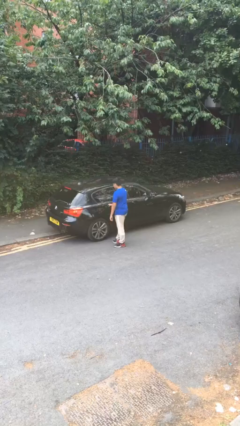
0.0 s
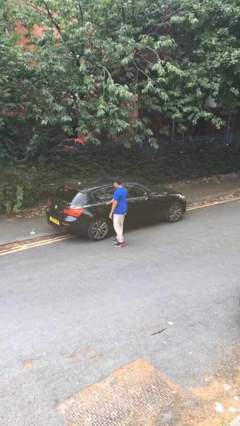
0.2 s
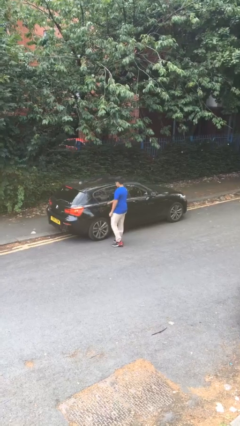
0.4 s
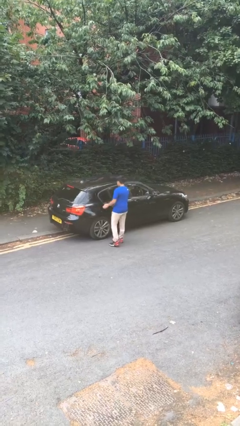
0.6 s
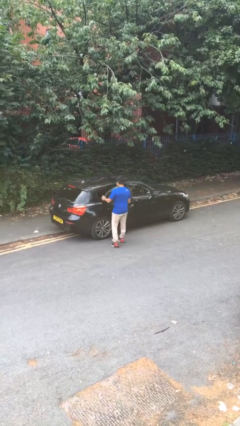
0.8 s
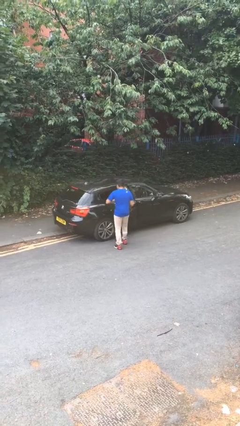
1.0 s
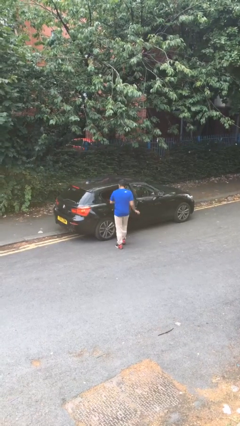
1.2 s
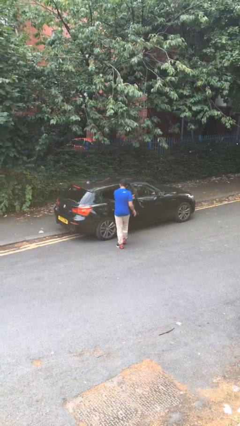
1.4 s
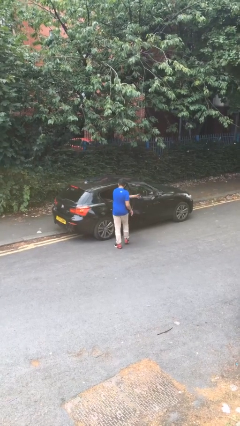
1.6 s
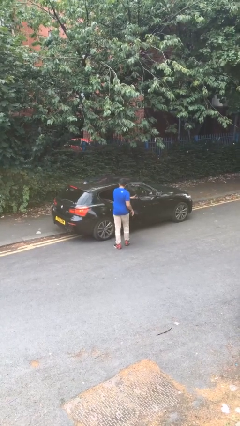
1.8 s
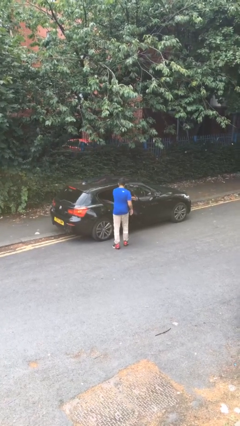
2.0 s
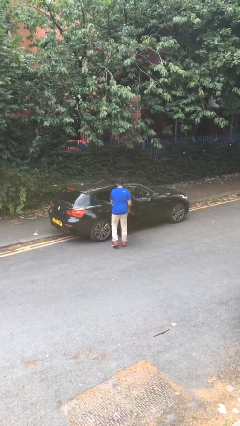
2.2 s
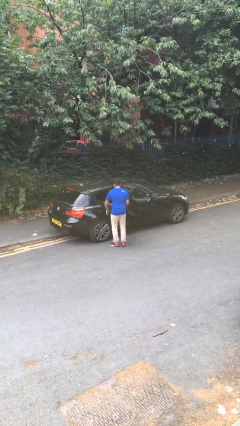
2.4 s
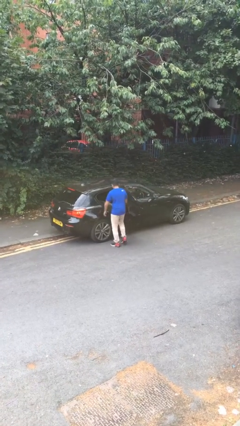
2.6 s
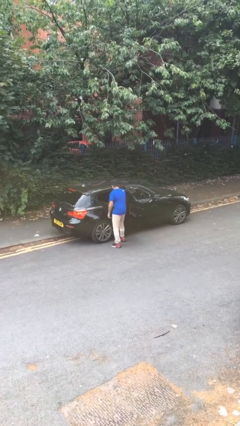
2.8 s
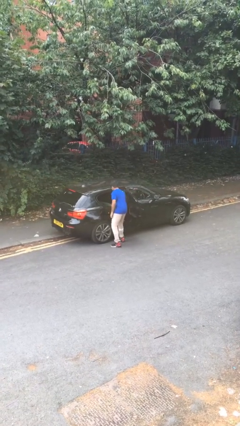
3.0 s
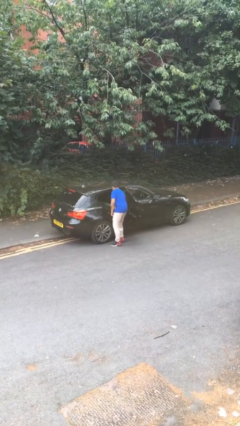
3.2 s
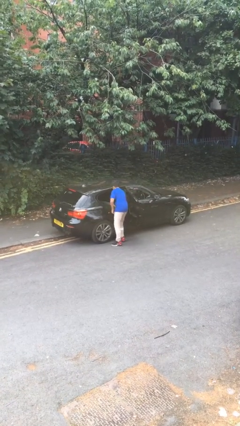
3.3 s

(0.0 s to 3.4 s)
person opens car door

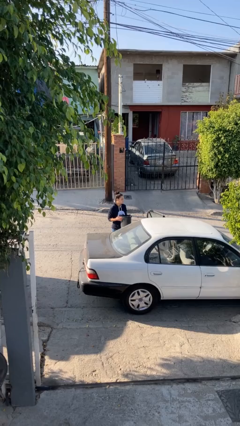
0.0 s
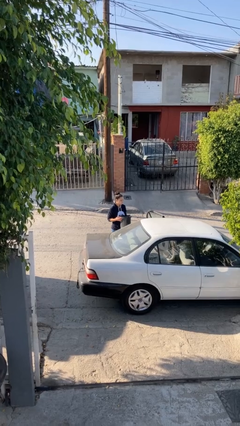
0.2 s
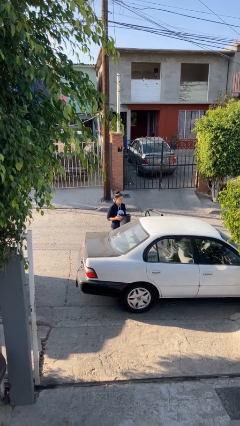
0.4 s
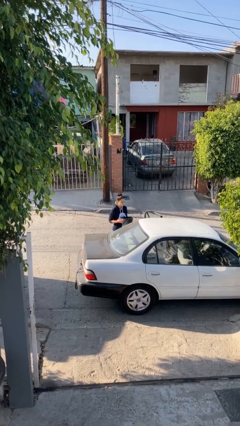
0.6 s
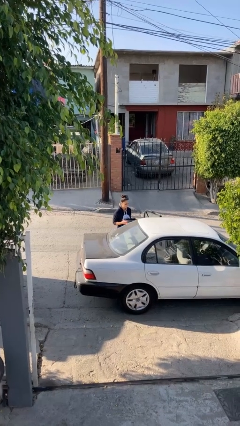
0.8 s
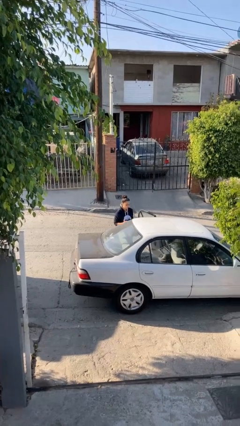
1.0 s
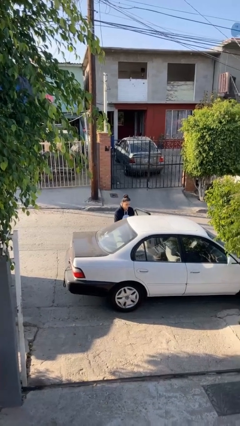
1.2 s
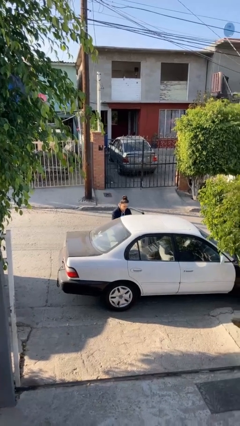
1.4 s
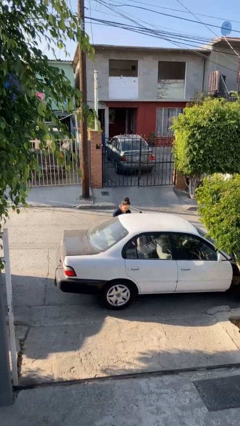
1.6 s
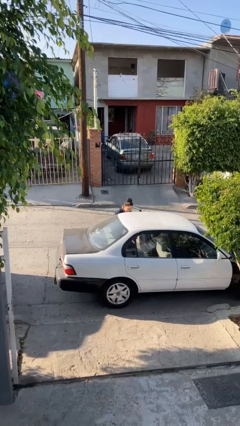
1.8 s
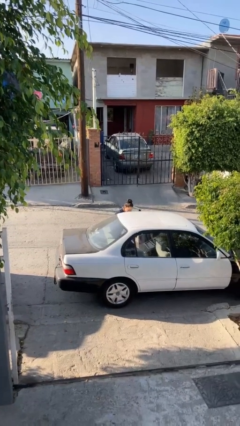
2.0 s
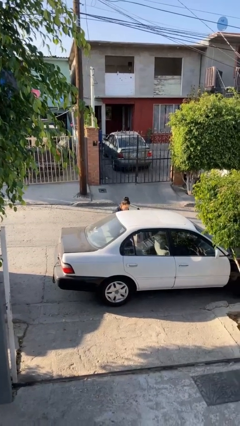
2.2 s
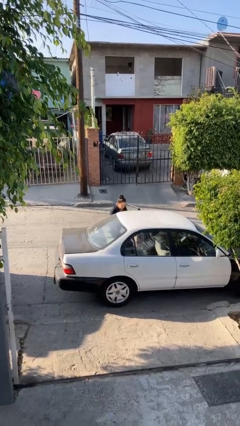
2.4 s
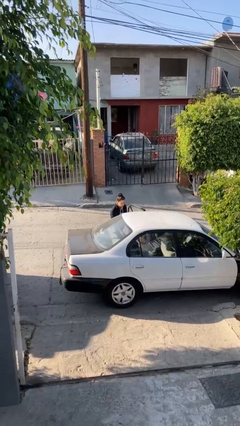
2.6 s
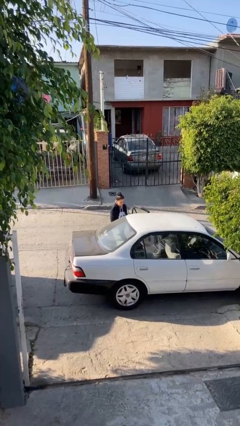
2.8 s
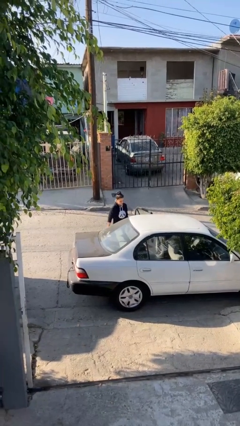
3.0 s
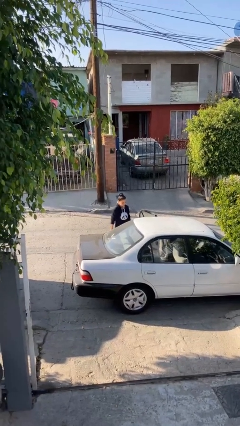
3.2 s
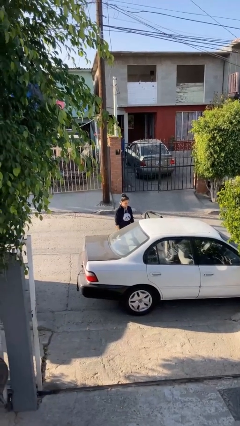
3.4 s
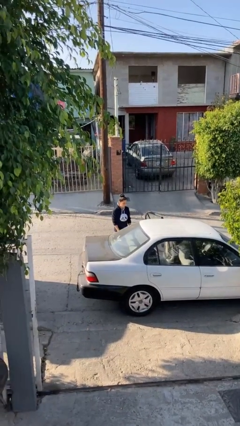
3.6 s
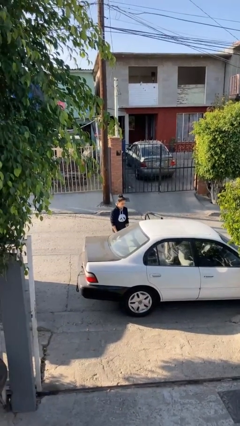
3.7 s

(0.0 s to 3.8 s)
person loads car

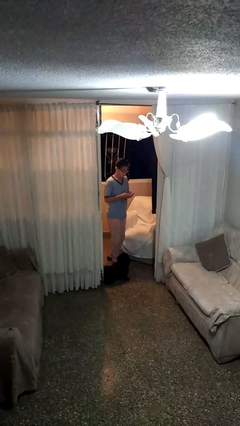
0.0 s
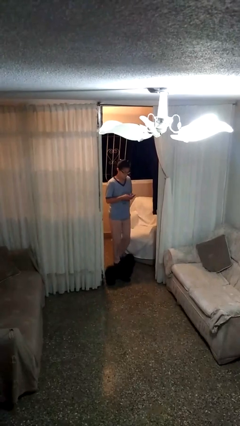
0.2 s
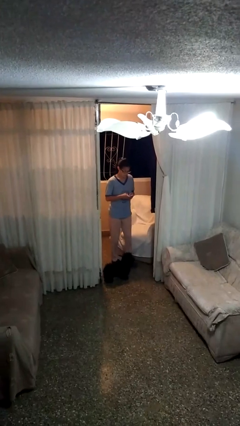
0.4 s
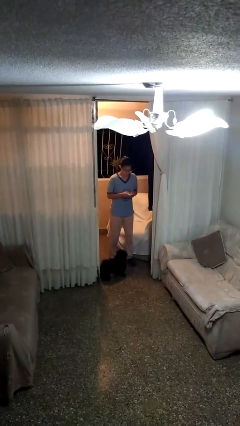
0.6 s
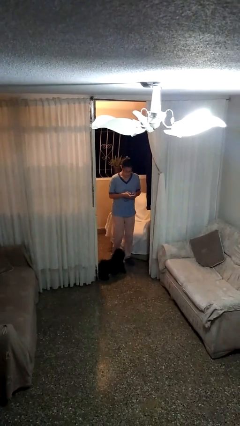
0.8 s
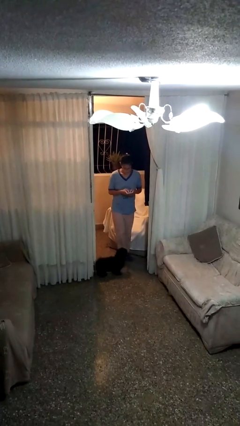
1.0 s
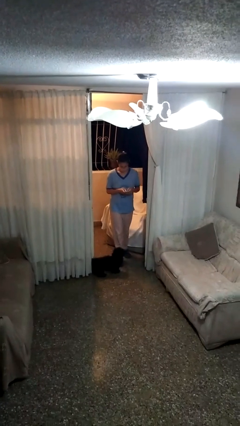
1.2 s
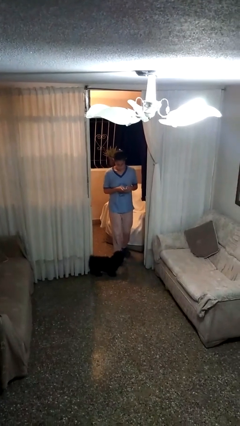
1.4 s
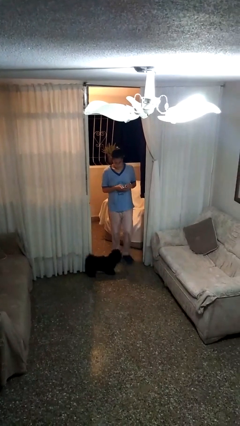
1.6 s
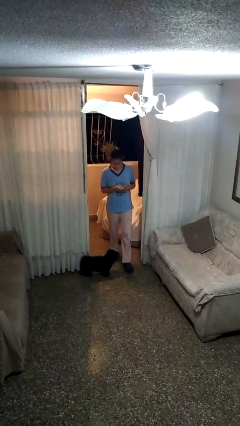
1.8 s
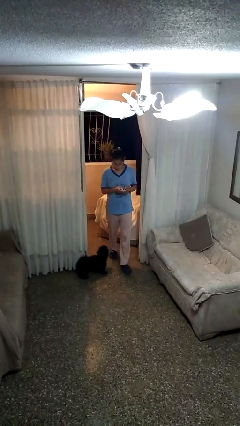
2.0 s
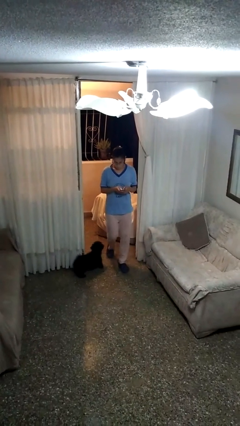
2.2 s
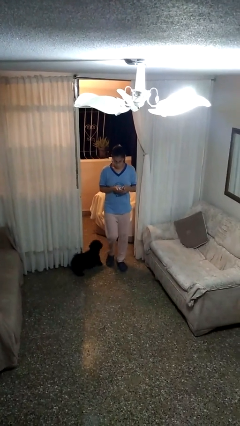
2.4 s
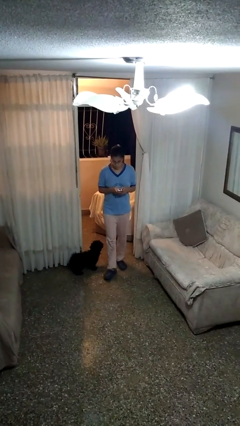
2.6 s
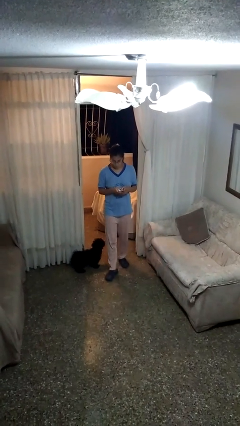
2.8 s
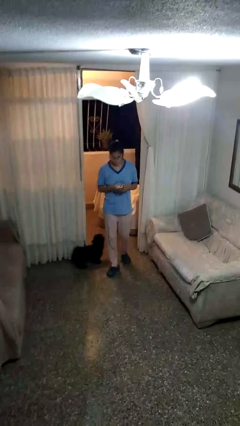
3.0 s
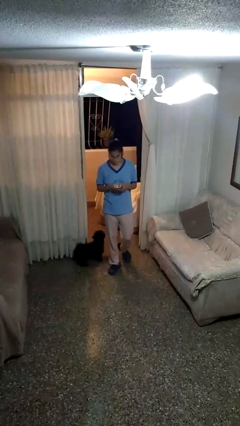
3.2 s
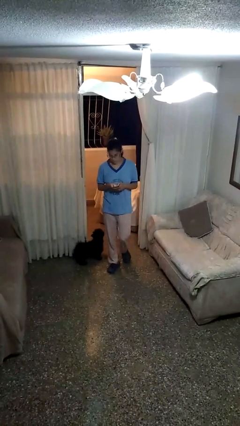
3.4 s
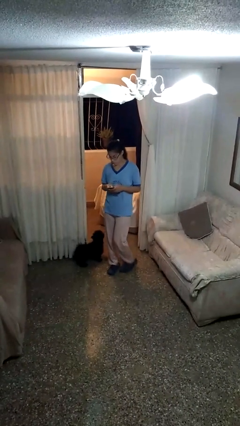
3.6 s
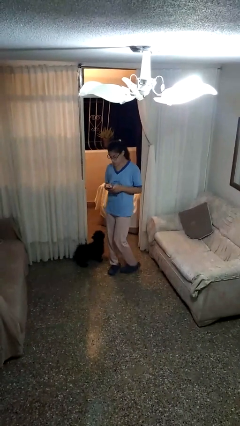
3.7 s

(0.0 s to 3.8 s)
person enters scene through structure

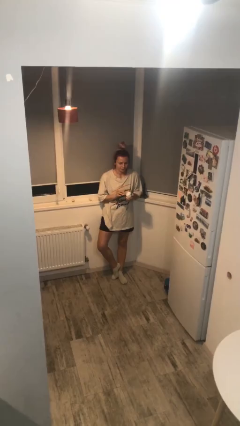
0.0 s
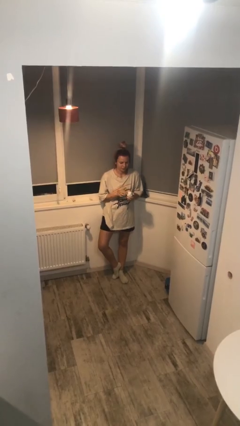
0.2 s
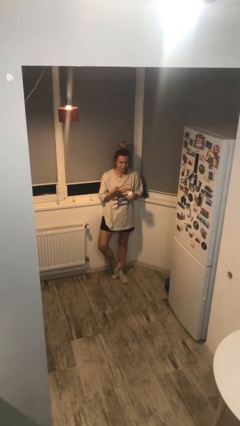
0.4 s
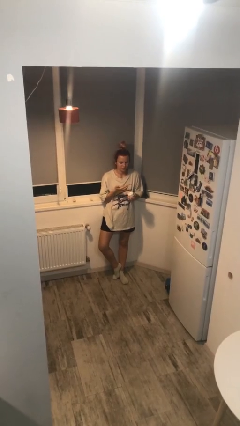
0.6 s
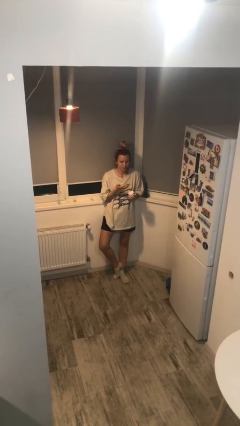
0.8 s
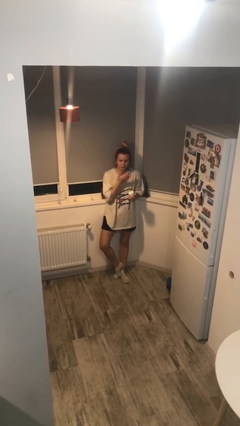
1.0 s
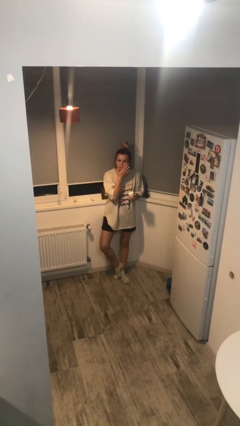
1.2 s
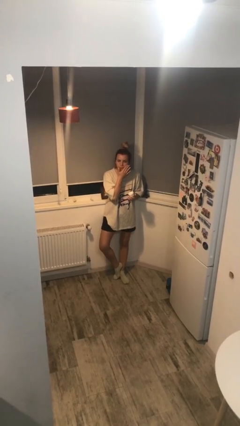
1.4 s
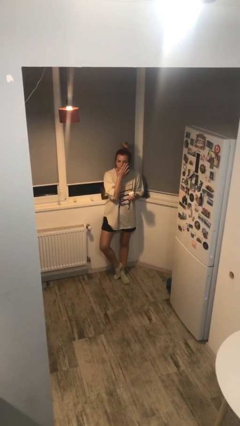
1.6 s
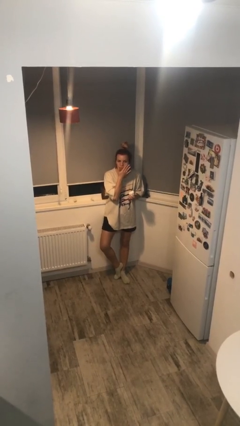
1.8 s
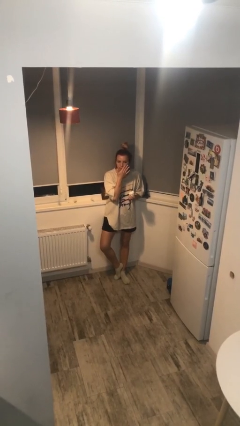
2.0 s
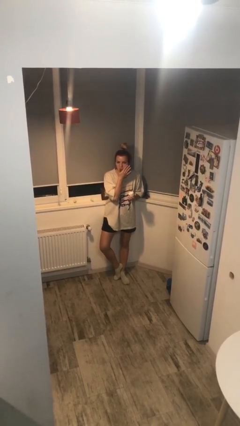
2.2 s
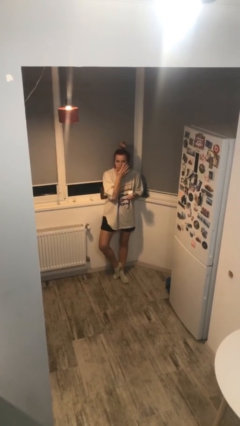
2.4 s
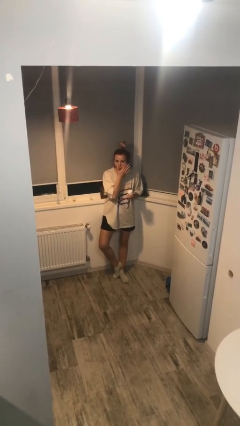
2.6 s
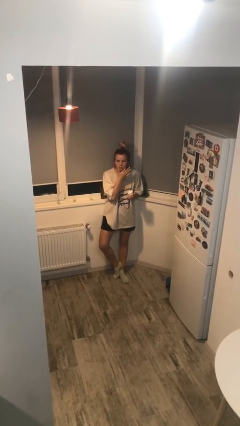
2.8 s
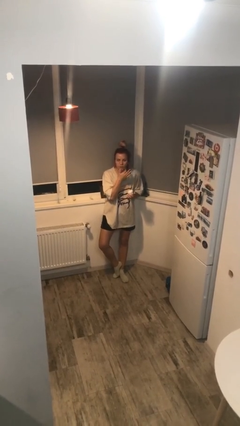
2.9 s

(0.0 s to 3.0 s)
person applies facial moisturizer

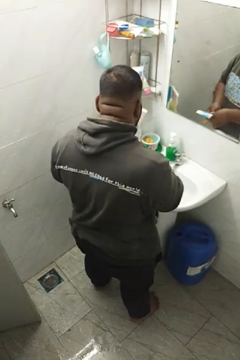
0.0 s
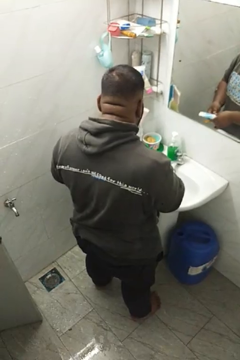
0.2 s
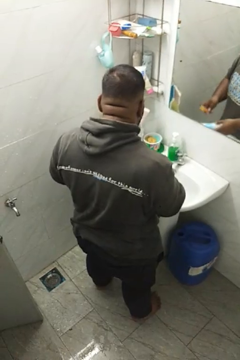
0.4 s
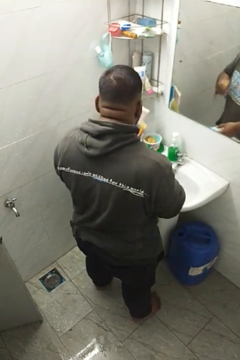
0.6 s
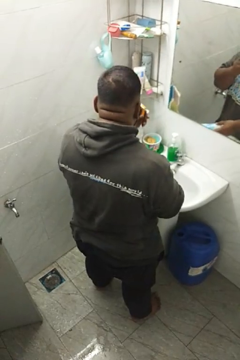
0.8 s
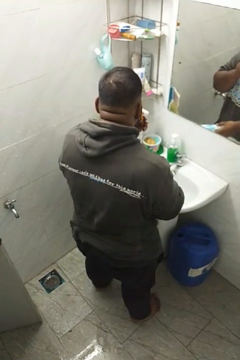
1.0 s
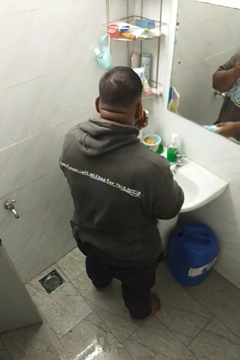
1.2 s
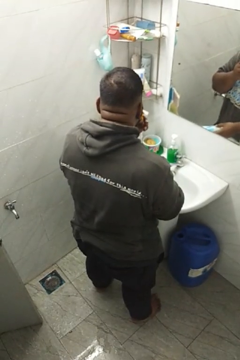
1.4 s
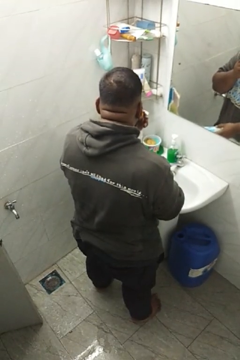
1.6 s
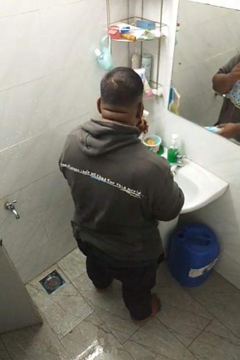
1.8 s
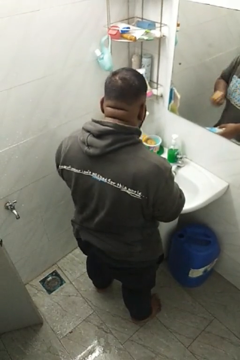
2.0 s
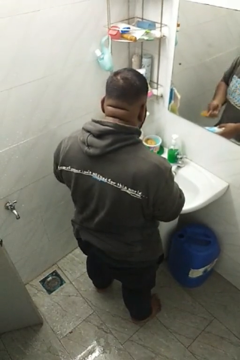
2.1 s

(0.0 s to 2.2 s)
person shaves face

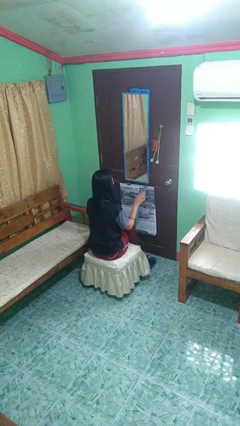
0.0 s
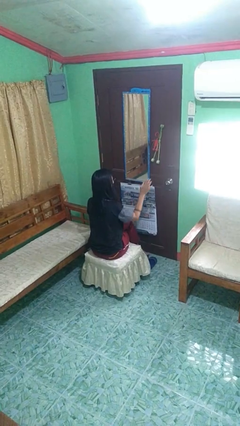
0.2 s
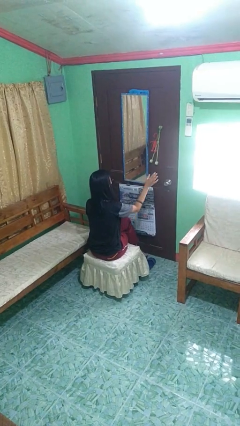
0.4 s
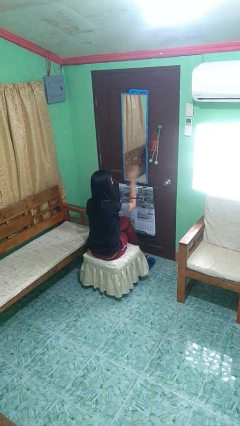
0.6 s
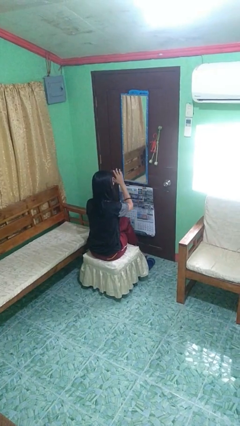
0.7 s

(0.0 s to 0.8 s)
person gestures swipe right

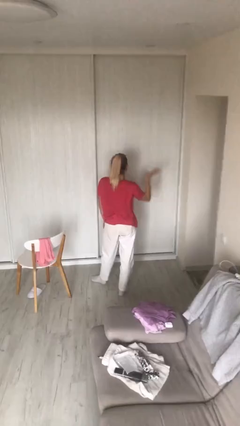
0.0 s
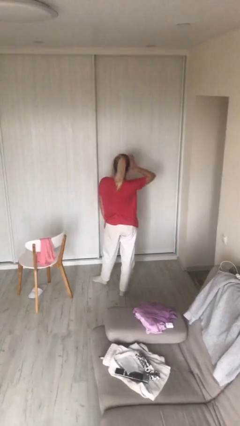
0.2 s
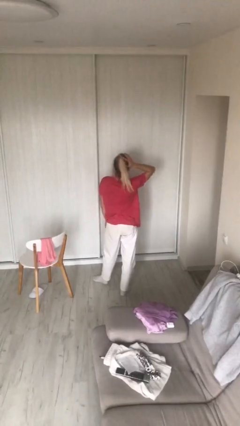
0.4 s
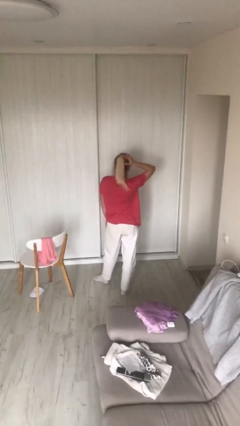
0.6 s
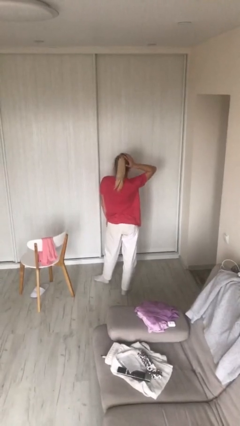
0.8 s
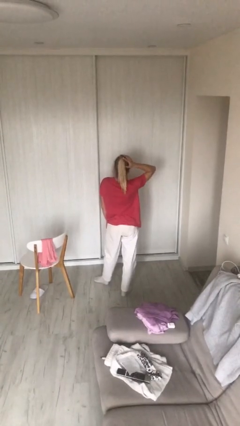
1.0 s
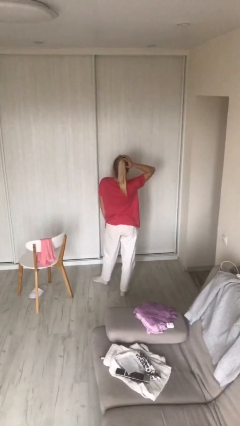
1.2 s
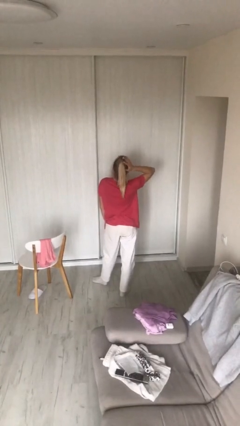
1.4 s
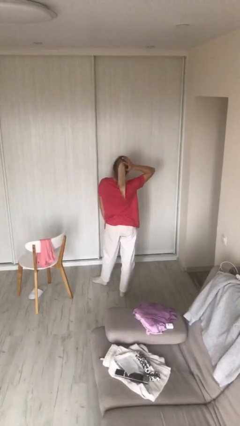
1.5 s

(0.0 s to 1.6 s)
person pats head
